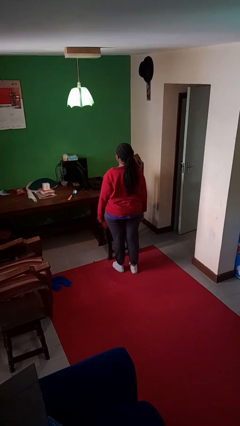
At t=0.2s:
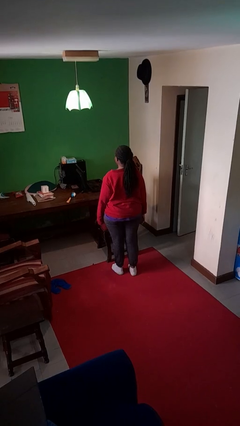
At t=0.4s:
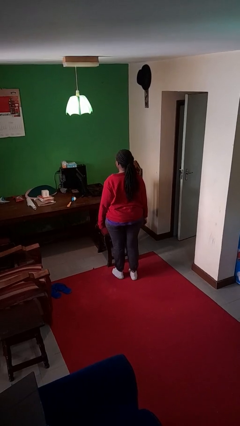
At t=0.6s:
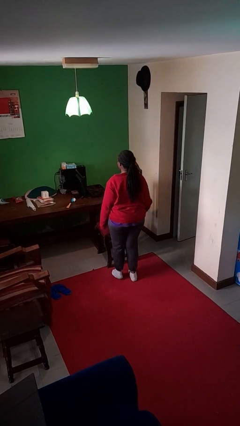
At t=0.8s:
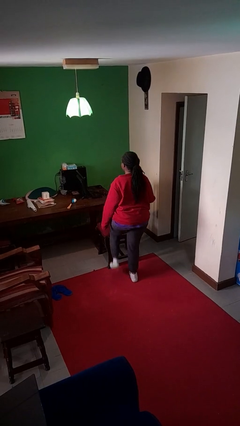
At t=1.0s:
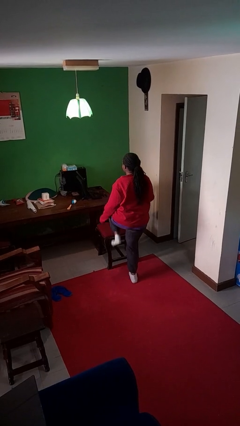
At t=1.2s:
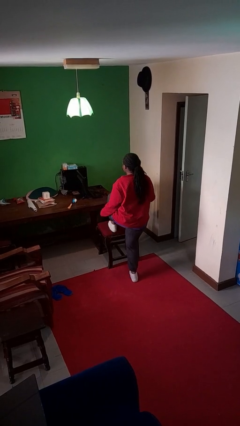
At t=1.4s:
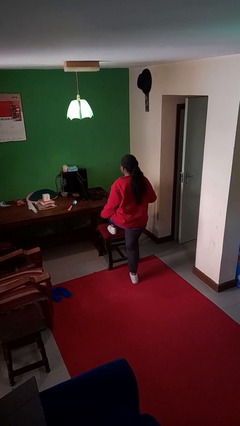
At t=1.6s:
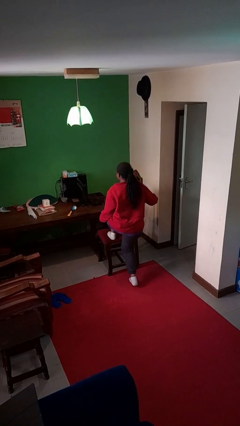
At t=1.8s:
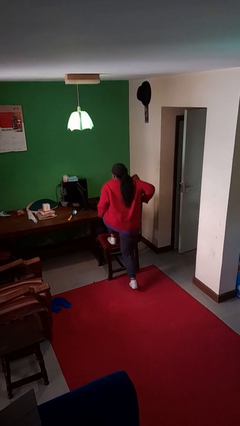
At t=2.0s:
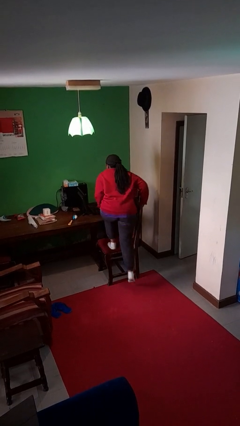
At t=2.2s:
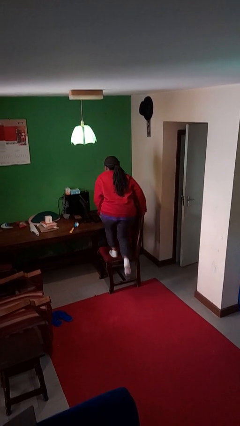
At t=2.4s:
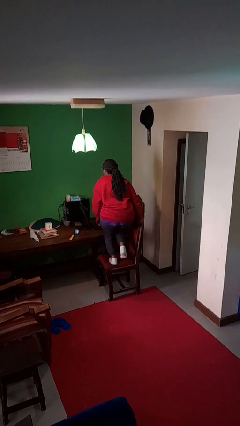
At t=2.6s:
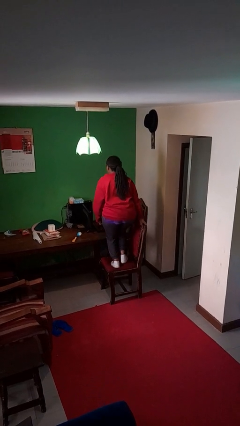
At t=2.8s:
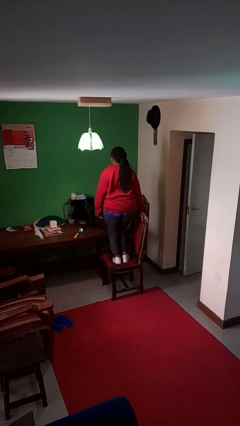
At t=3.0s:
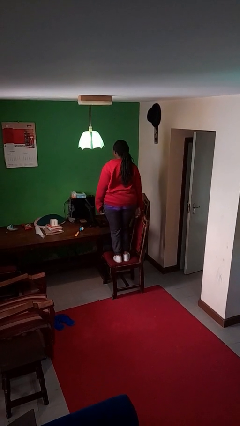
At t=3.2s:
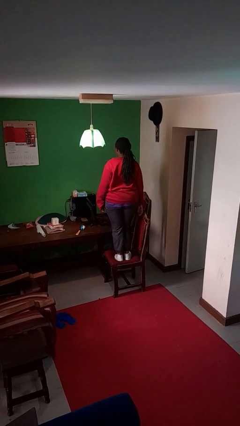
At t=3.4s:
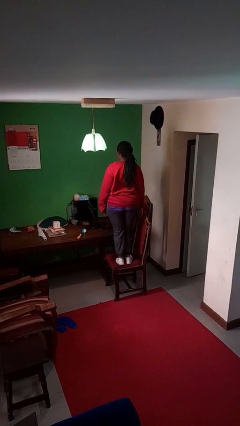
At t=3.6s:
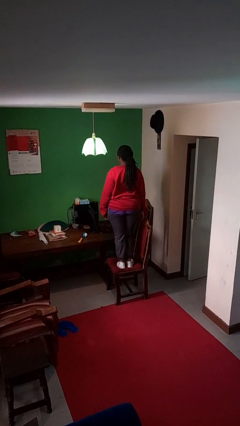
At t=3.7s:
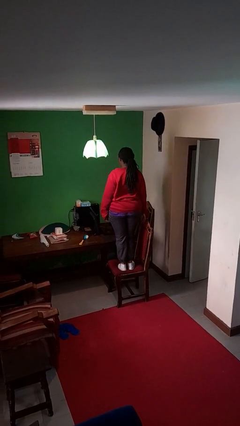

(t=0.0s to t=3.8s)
person climbs on chair

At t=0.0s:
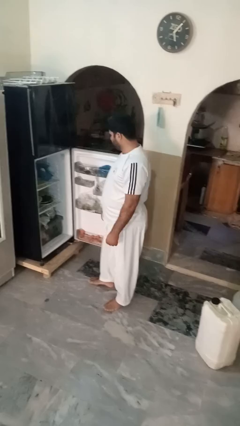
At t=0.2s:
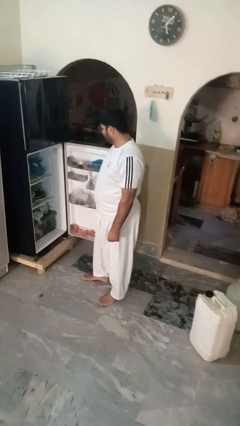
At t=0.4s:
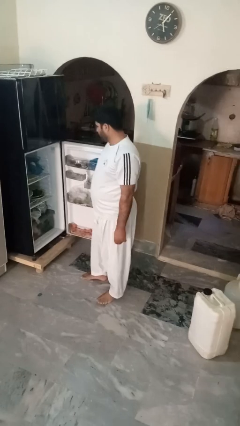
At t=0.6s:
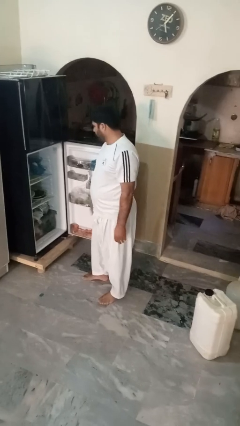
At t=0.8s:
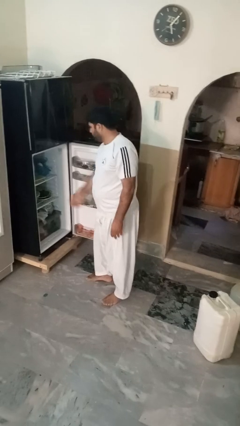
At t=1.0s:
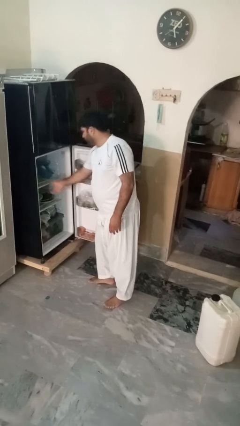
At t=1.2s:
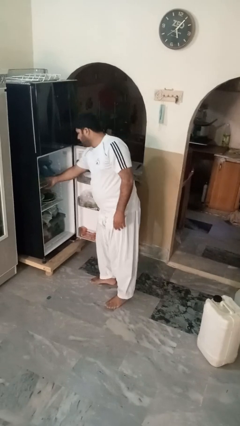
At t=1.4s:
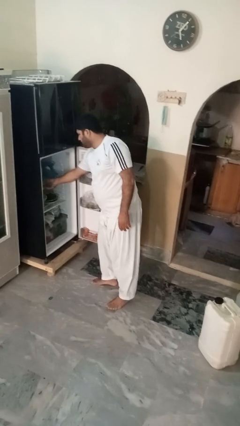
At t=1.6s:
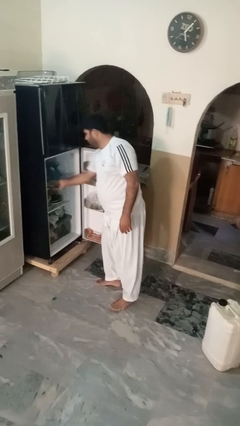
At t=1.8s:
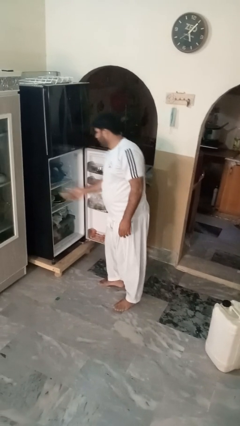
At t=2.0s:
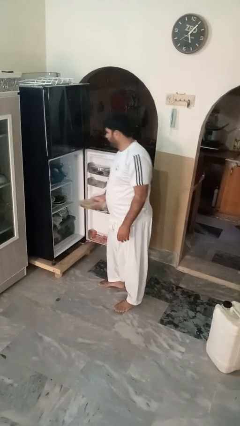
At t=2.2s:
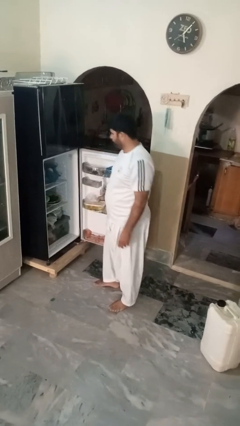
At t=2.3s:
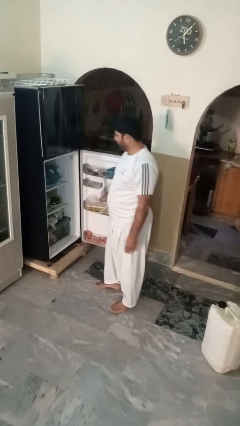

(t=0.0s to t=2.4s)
person takes object from refrigerator

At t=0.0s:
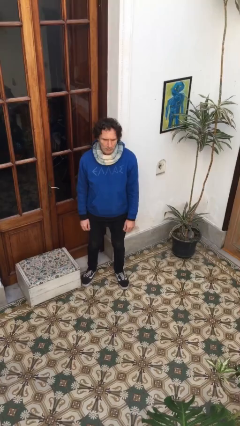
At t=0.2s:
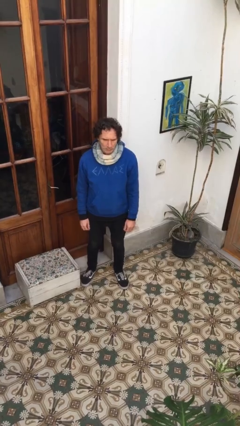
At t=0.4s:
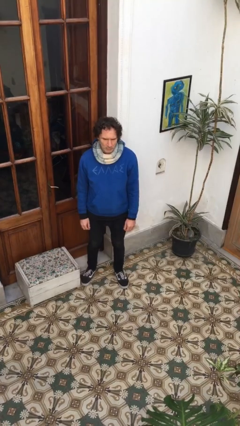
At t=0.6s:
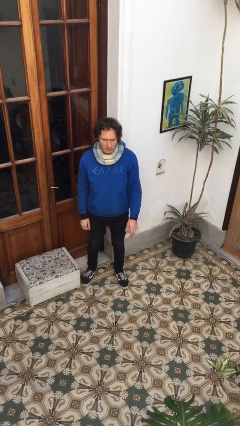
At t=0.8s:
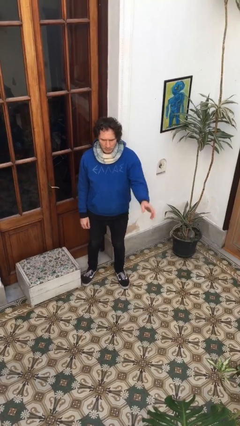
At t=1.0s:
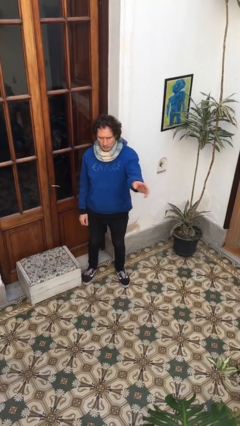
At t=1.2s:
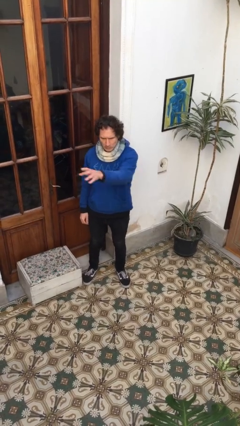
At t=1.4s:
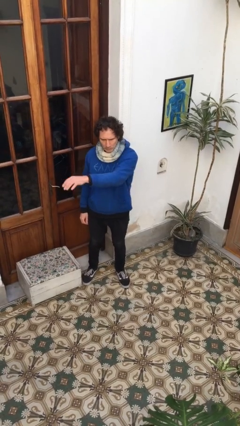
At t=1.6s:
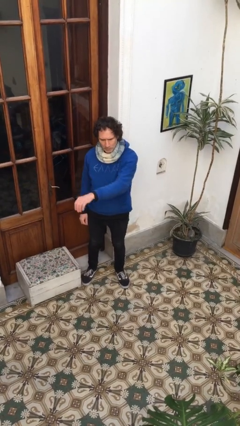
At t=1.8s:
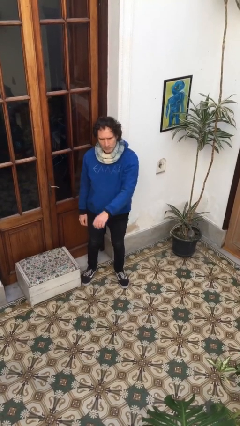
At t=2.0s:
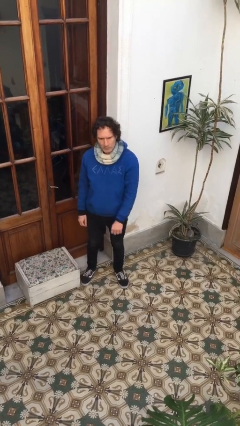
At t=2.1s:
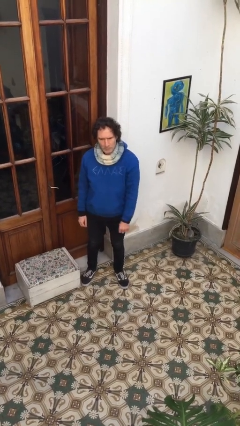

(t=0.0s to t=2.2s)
person gestures swipe right

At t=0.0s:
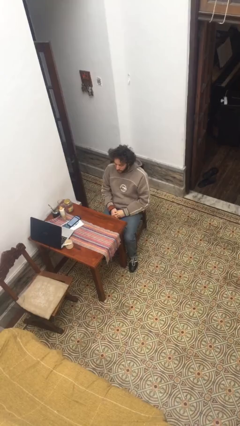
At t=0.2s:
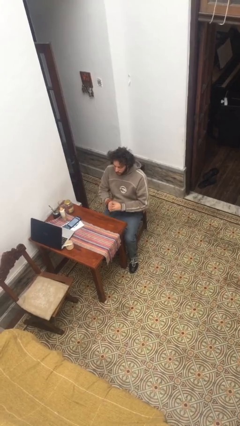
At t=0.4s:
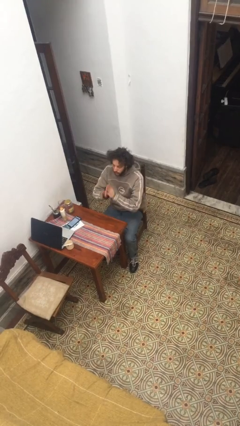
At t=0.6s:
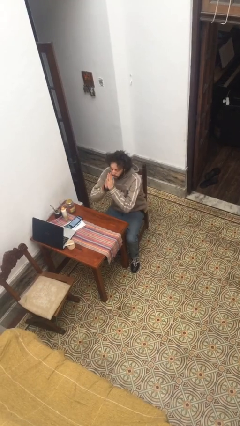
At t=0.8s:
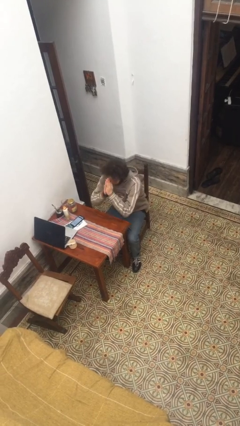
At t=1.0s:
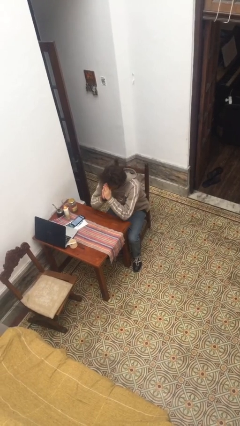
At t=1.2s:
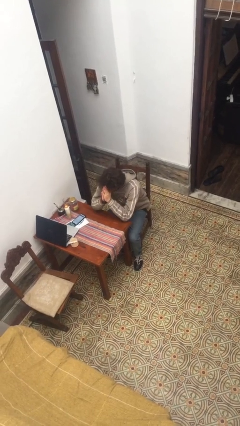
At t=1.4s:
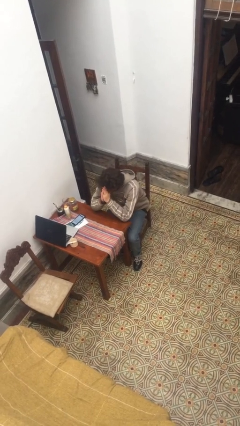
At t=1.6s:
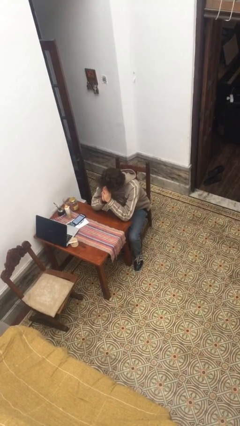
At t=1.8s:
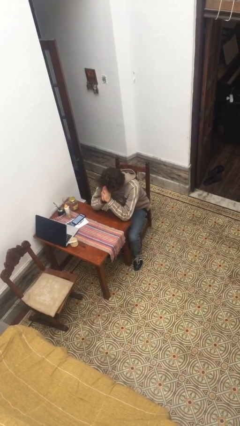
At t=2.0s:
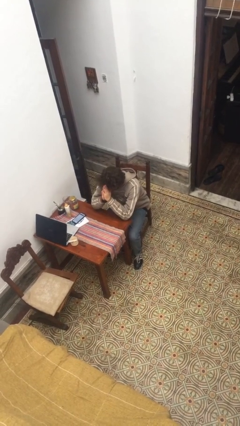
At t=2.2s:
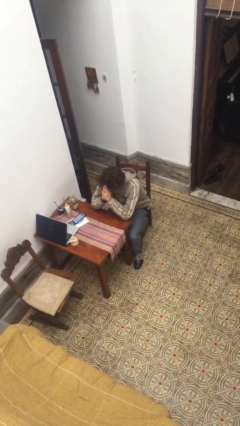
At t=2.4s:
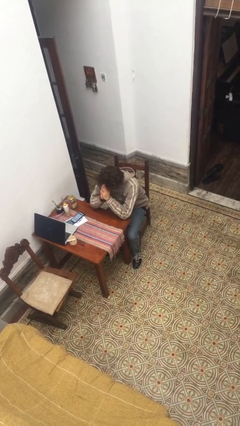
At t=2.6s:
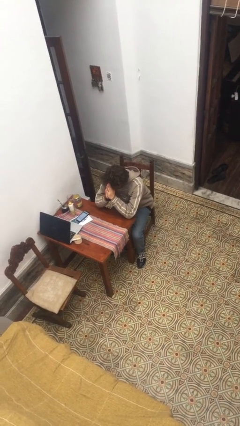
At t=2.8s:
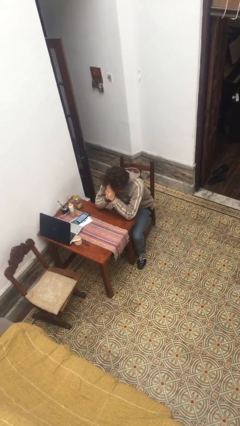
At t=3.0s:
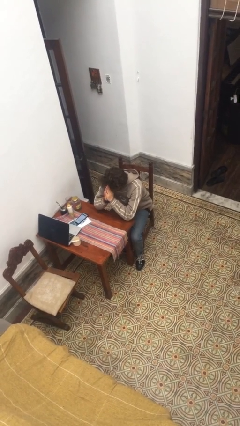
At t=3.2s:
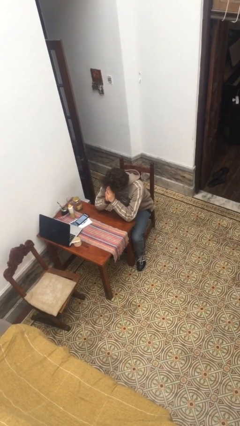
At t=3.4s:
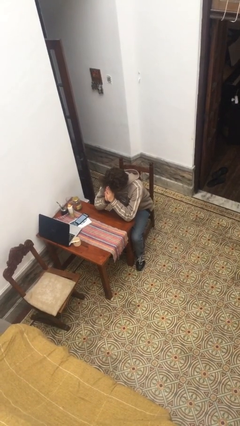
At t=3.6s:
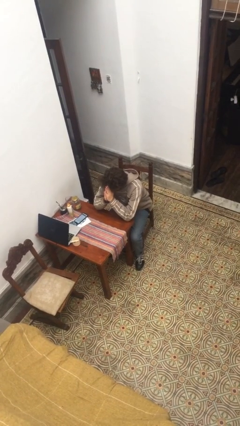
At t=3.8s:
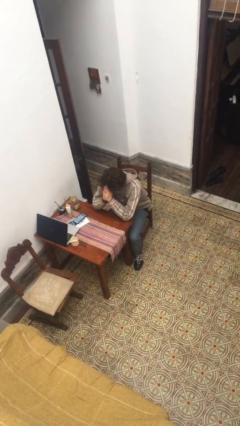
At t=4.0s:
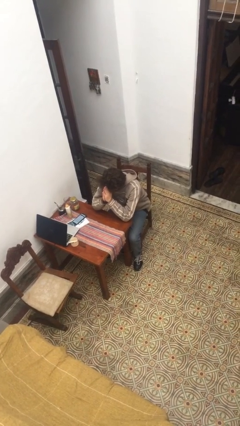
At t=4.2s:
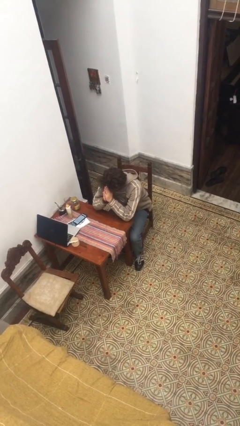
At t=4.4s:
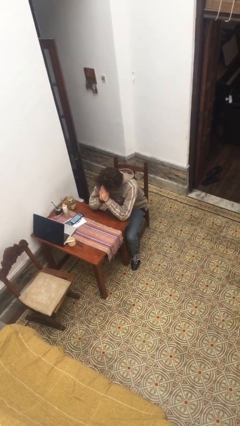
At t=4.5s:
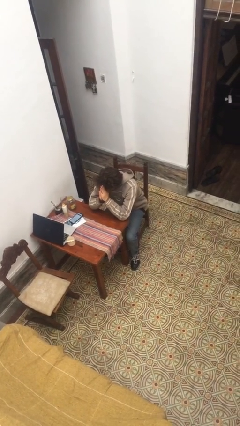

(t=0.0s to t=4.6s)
person prays

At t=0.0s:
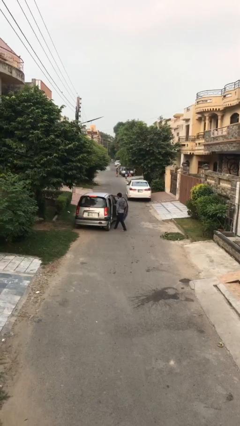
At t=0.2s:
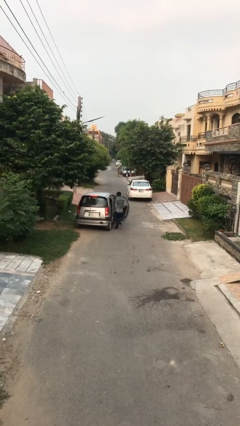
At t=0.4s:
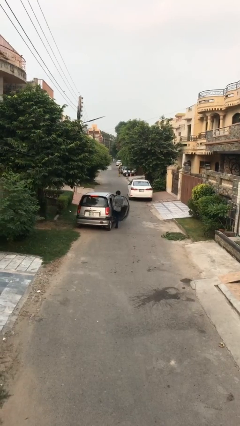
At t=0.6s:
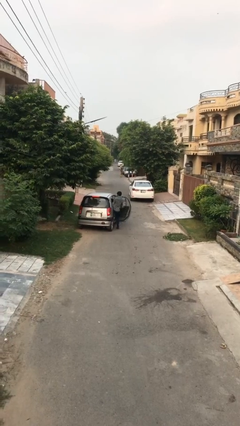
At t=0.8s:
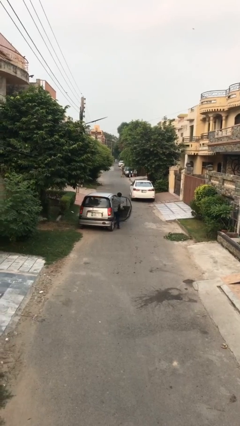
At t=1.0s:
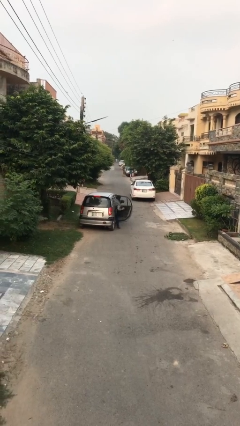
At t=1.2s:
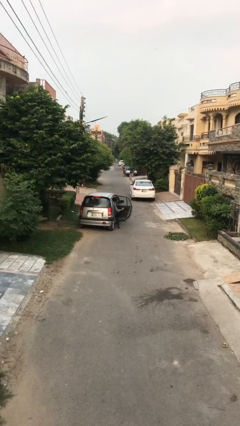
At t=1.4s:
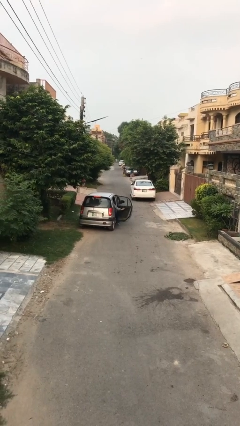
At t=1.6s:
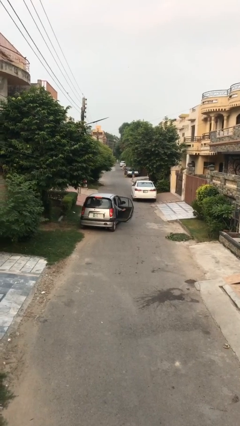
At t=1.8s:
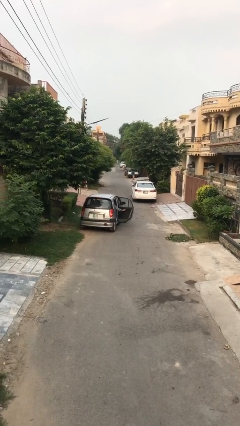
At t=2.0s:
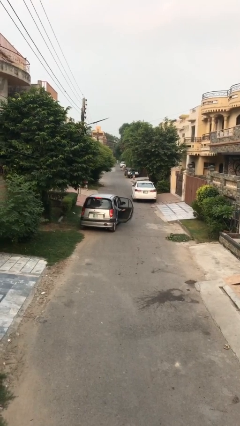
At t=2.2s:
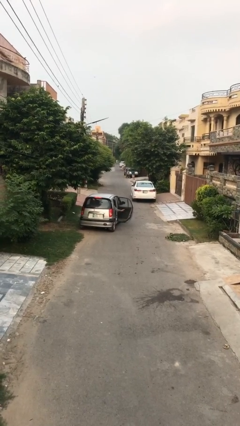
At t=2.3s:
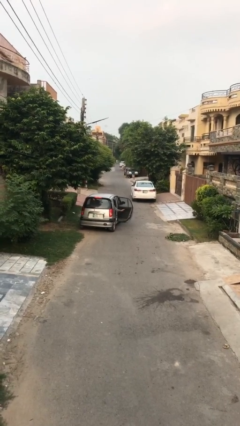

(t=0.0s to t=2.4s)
person enters car

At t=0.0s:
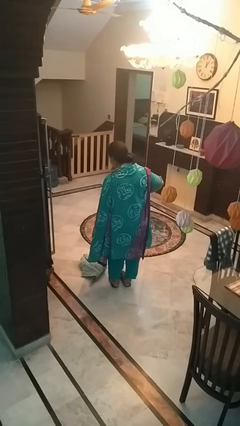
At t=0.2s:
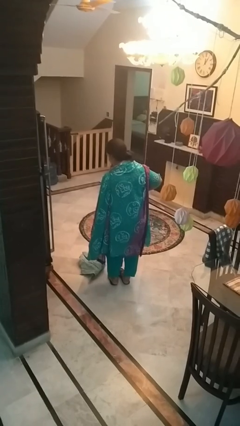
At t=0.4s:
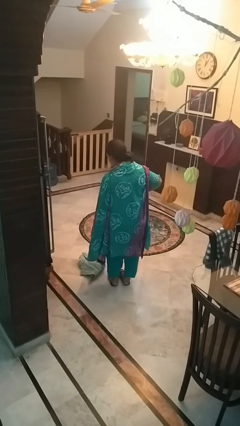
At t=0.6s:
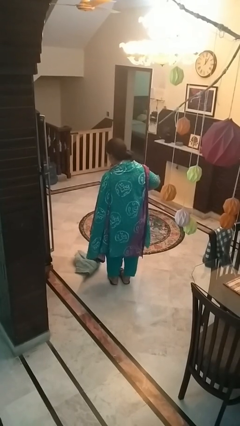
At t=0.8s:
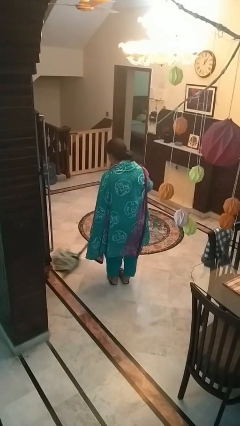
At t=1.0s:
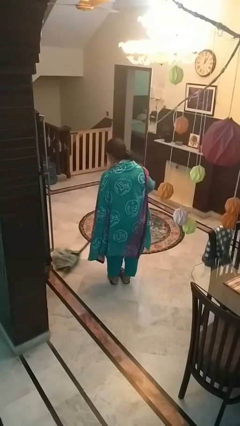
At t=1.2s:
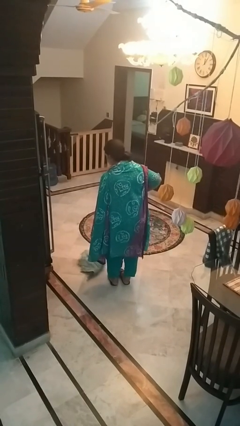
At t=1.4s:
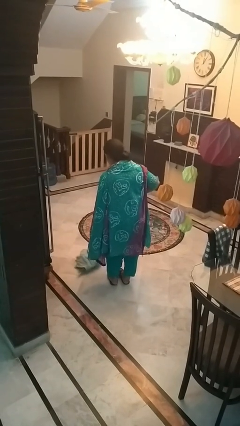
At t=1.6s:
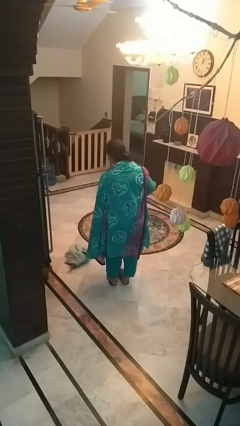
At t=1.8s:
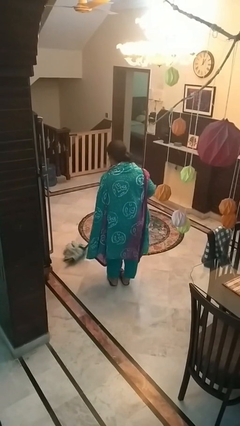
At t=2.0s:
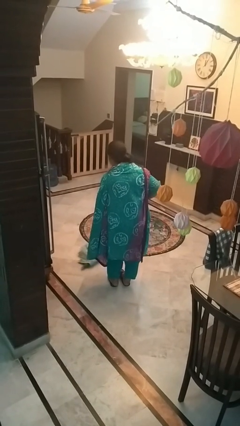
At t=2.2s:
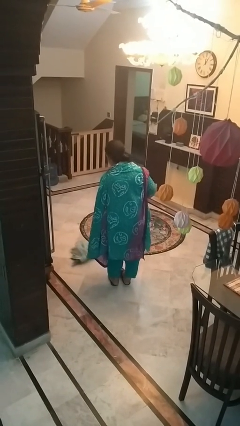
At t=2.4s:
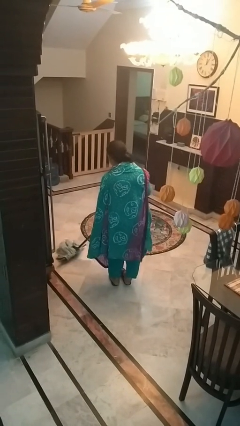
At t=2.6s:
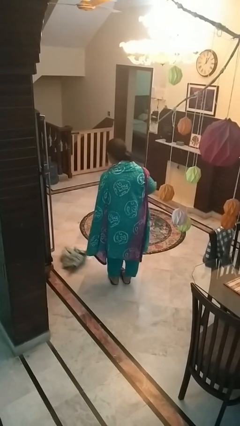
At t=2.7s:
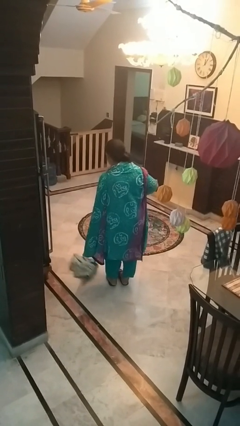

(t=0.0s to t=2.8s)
person mops
